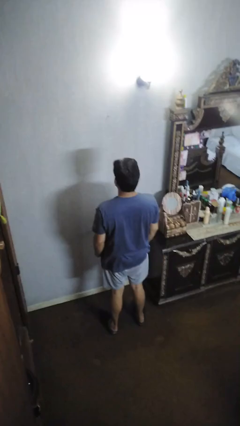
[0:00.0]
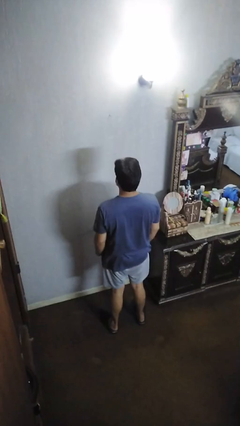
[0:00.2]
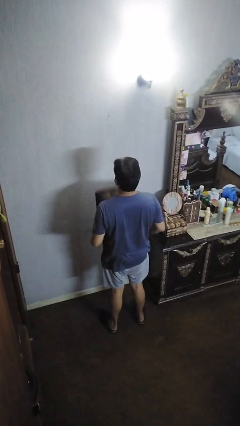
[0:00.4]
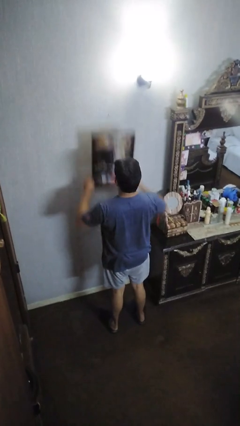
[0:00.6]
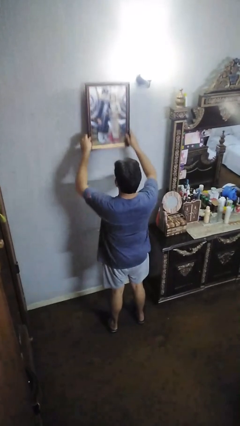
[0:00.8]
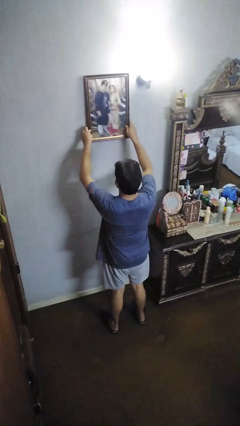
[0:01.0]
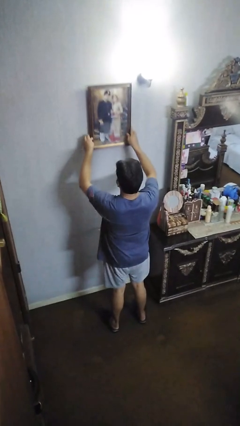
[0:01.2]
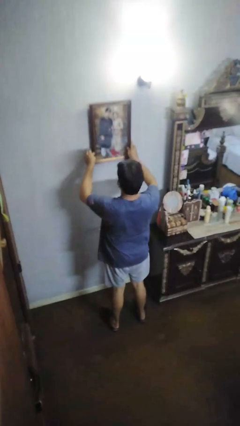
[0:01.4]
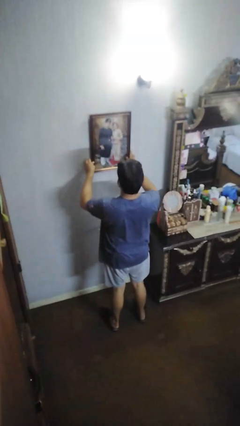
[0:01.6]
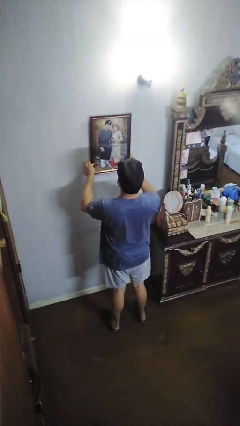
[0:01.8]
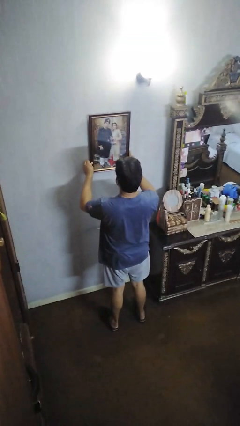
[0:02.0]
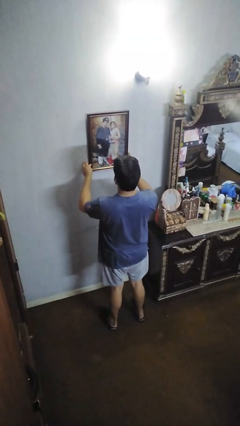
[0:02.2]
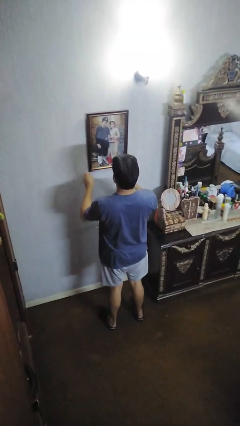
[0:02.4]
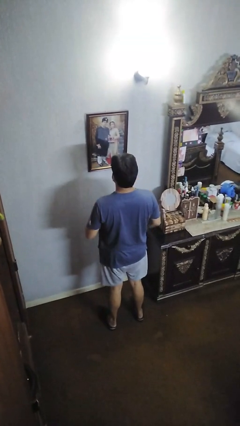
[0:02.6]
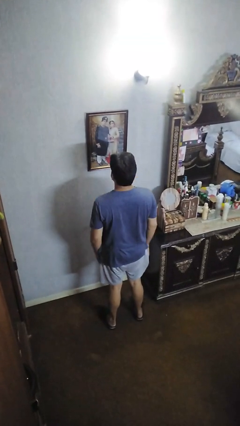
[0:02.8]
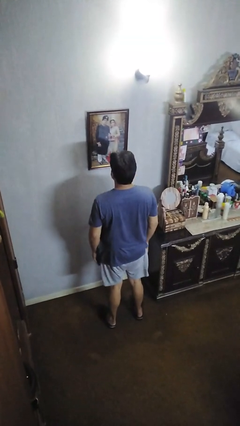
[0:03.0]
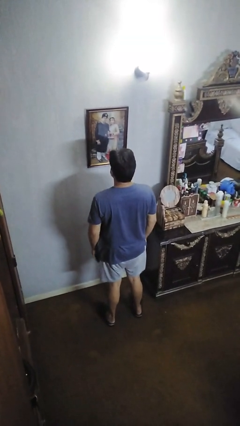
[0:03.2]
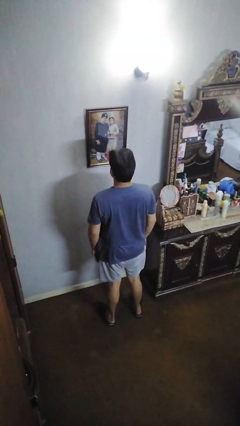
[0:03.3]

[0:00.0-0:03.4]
person puts up picture frame

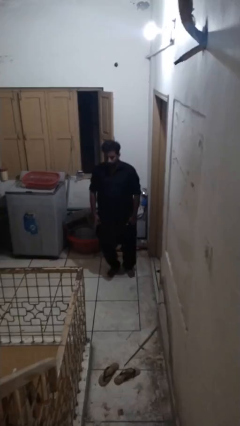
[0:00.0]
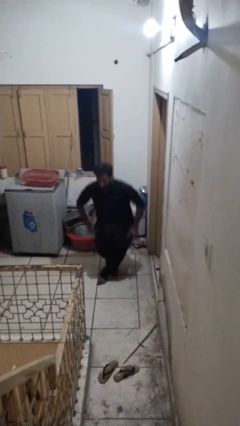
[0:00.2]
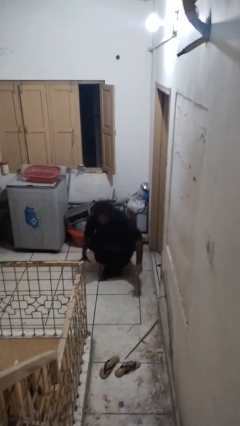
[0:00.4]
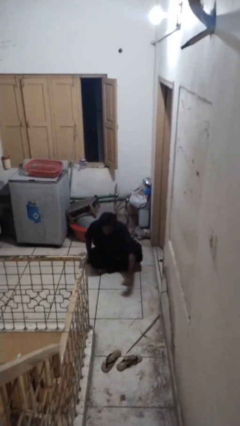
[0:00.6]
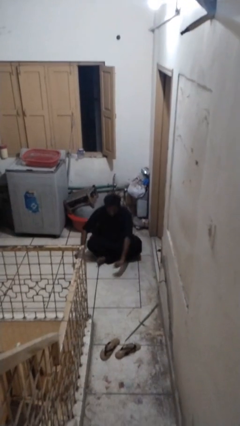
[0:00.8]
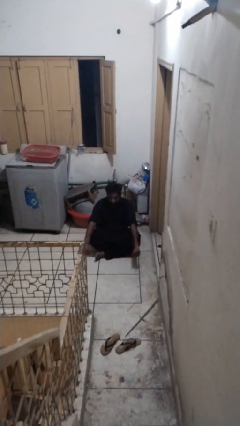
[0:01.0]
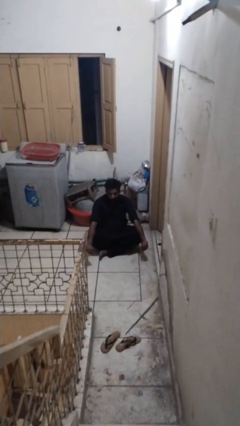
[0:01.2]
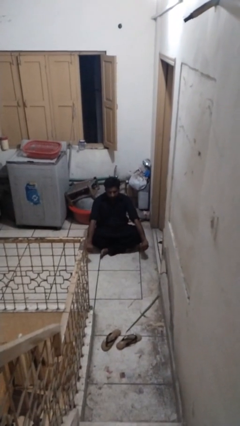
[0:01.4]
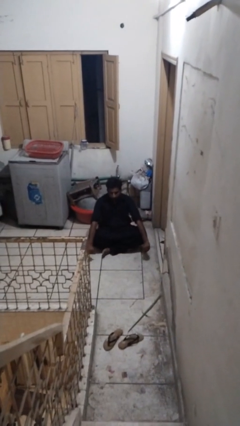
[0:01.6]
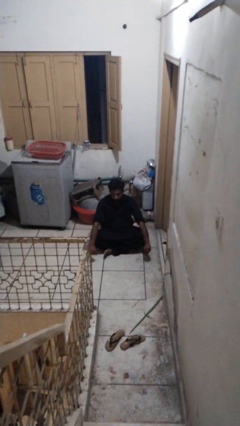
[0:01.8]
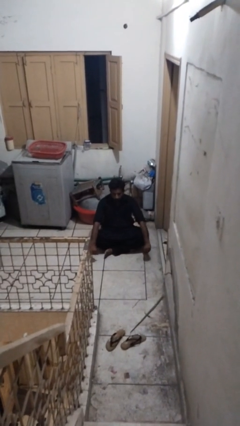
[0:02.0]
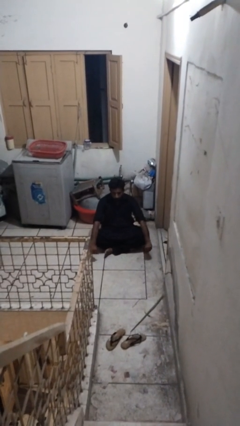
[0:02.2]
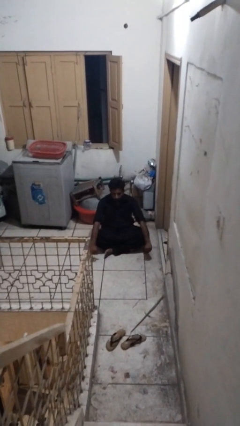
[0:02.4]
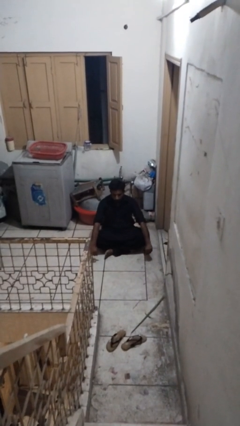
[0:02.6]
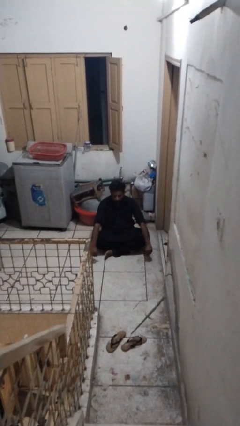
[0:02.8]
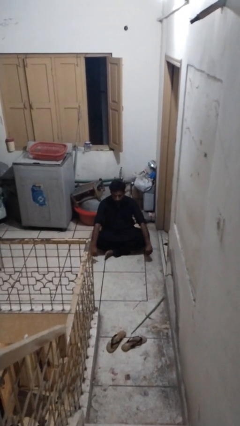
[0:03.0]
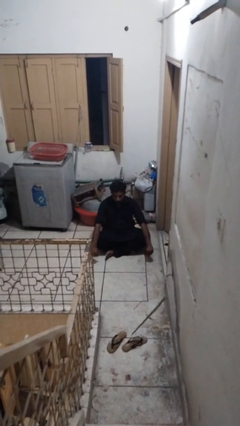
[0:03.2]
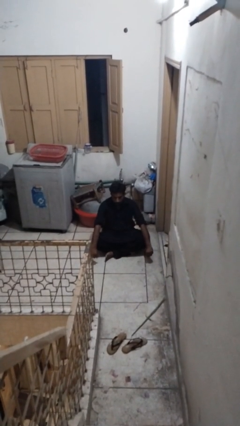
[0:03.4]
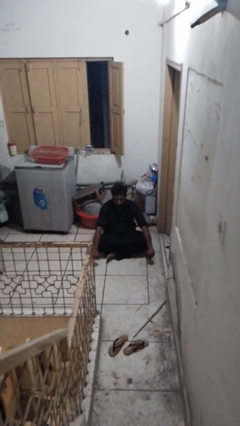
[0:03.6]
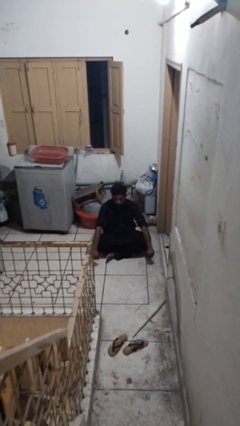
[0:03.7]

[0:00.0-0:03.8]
person sits crisscross

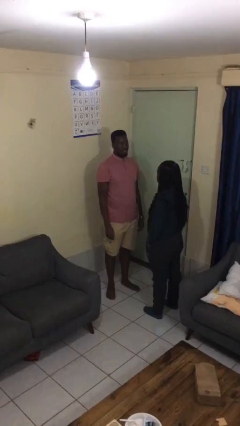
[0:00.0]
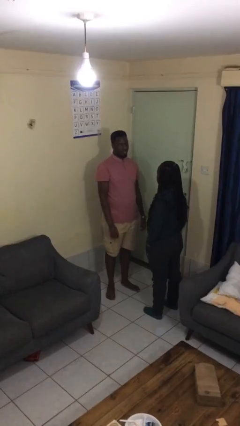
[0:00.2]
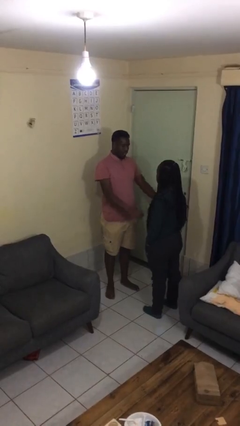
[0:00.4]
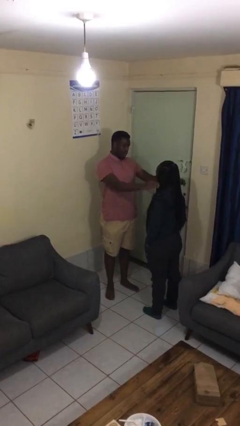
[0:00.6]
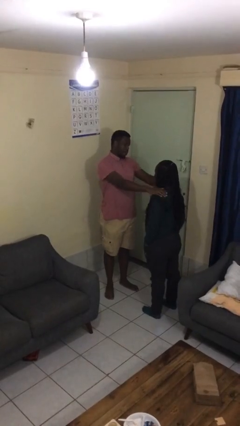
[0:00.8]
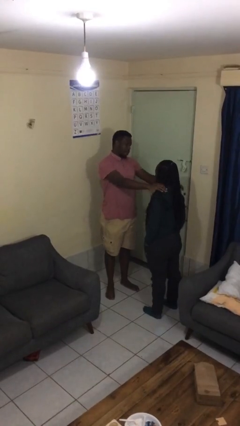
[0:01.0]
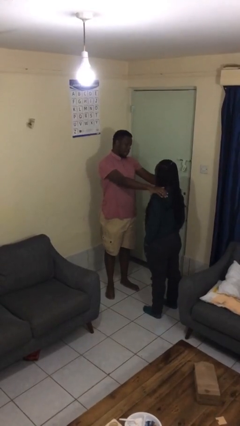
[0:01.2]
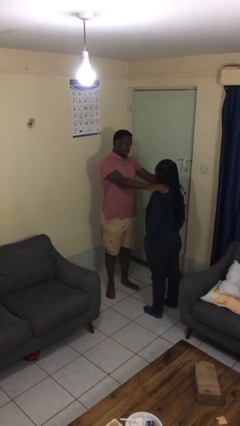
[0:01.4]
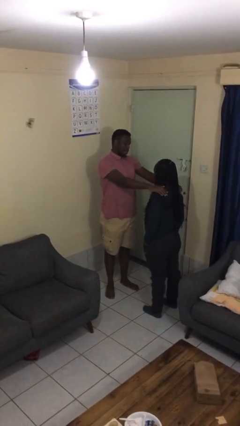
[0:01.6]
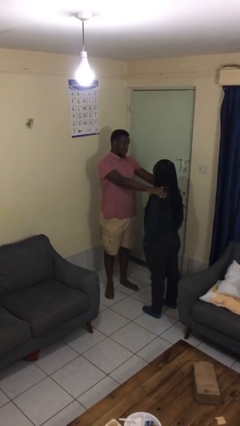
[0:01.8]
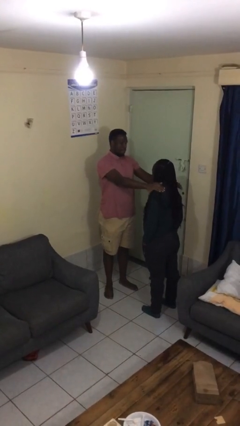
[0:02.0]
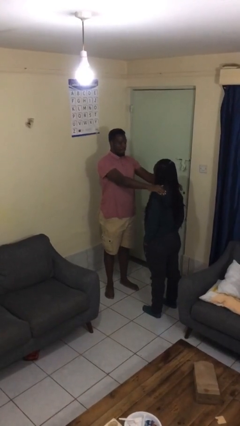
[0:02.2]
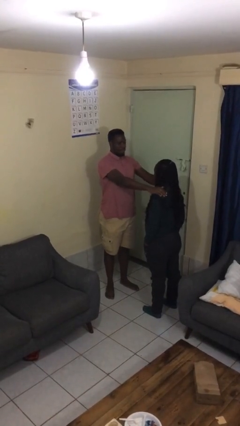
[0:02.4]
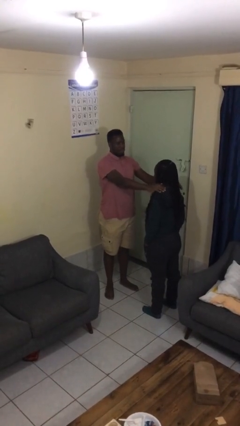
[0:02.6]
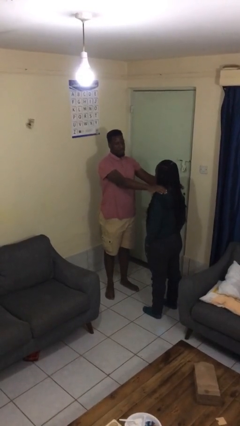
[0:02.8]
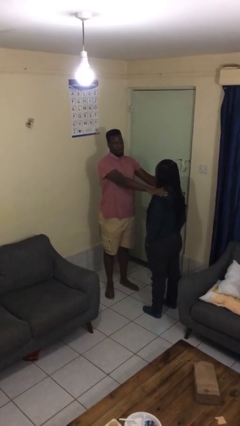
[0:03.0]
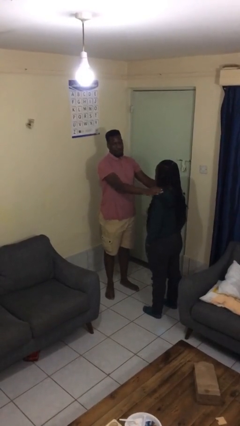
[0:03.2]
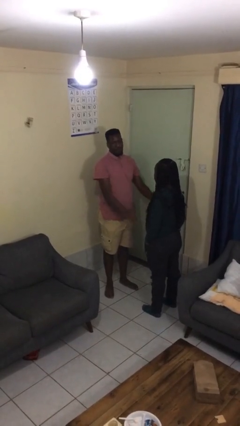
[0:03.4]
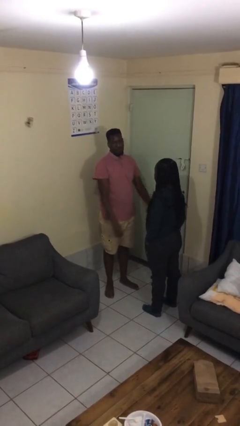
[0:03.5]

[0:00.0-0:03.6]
person pounds shoulders of person

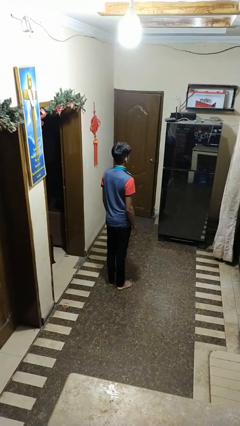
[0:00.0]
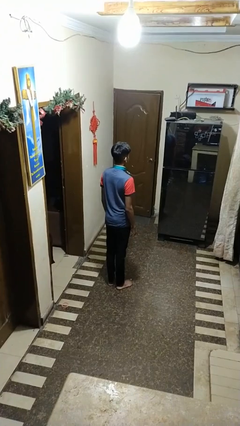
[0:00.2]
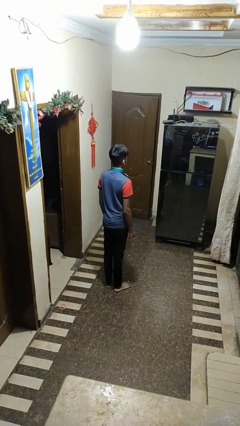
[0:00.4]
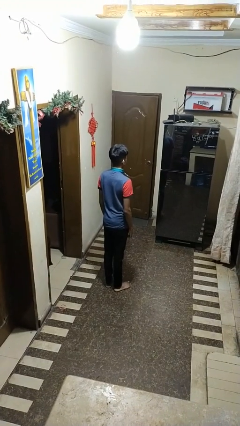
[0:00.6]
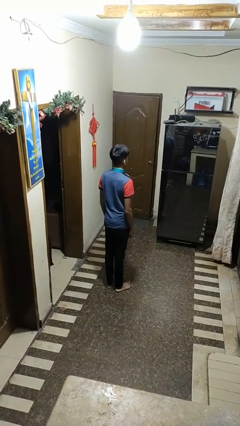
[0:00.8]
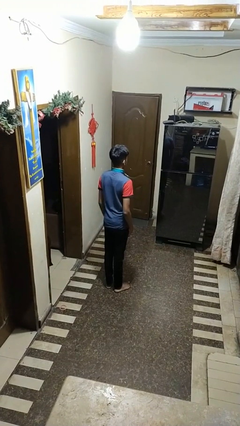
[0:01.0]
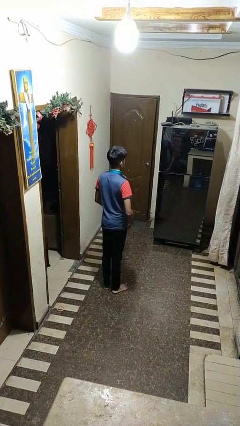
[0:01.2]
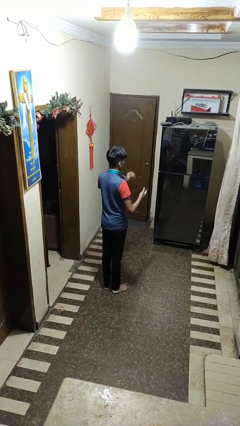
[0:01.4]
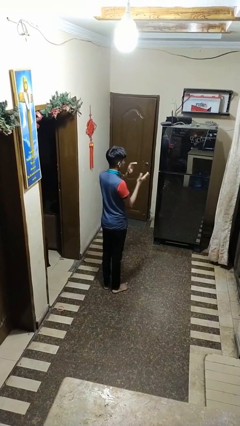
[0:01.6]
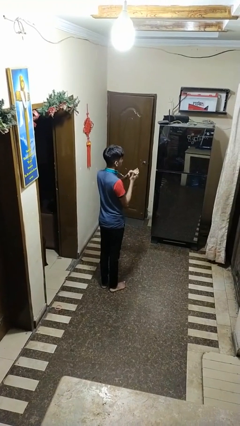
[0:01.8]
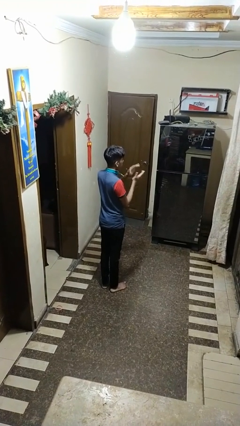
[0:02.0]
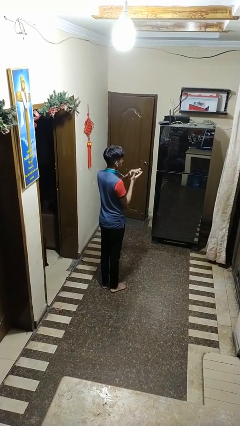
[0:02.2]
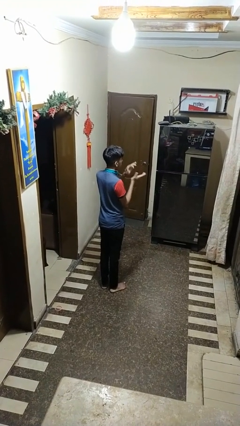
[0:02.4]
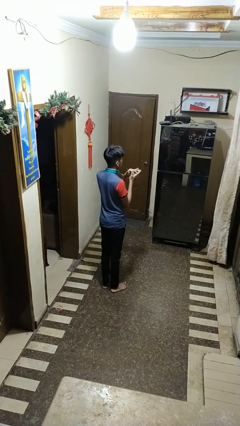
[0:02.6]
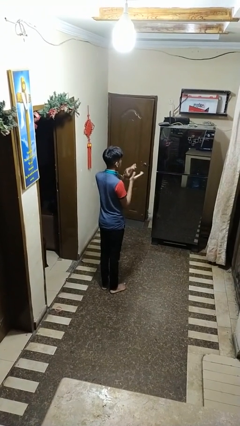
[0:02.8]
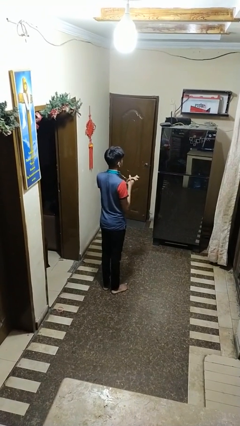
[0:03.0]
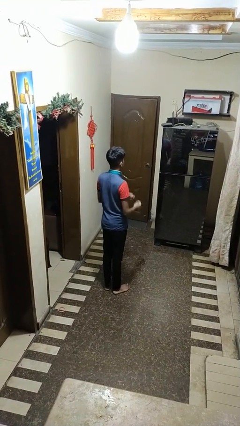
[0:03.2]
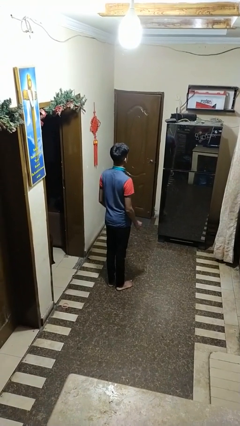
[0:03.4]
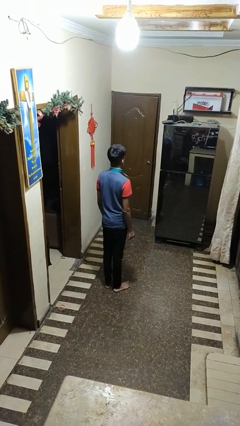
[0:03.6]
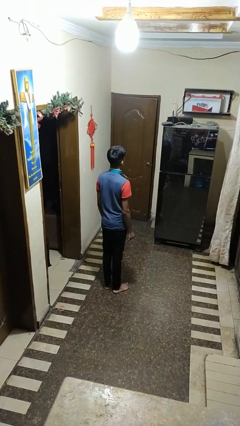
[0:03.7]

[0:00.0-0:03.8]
person claps hands

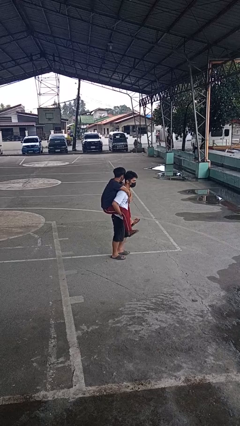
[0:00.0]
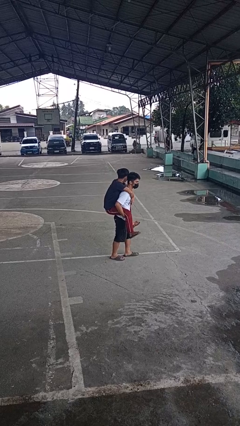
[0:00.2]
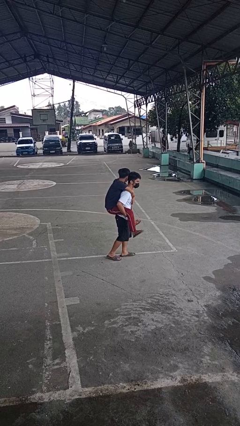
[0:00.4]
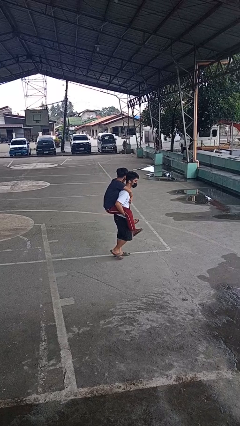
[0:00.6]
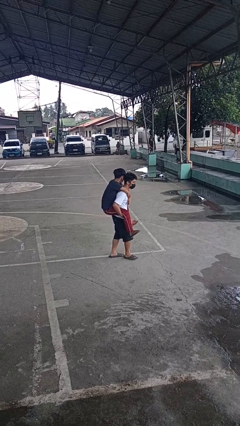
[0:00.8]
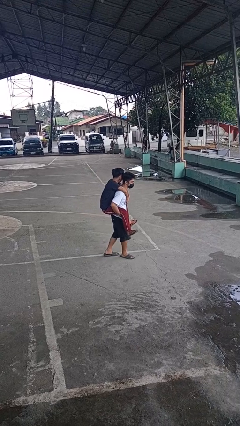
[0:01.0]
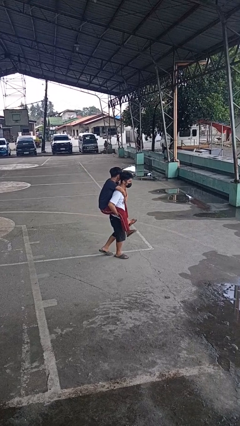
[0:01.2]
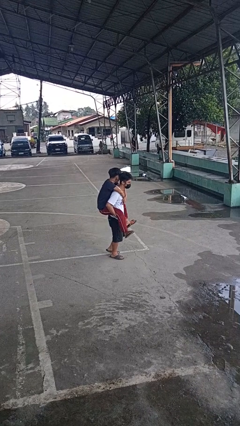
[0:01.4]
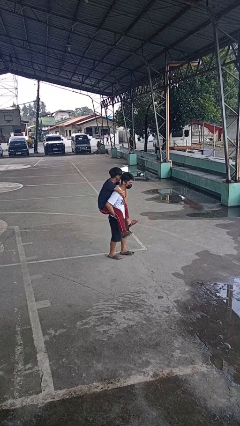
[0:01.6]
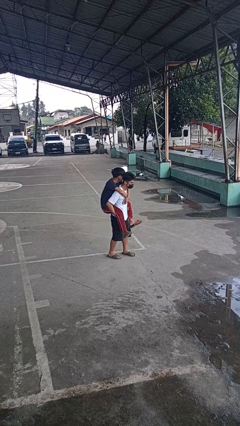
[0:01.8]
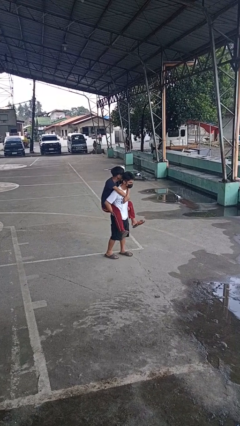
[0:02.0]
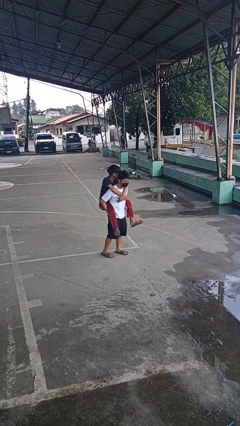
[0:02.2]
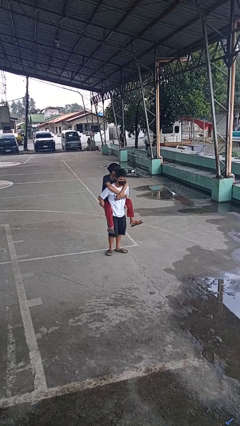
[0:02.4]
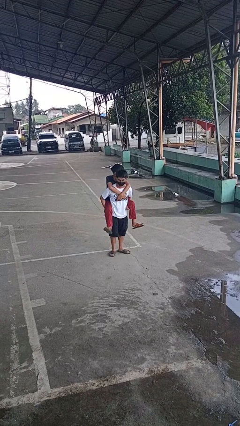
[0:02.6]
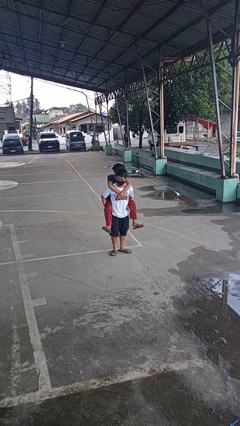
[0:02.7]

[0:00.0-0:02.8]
person carries person on shoulders

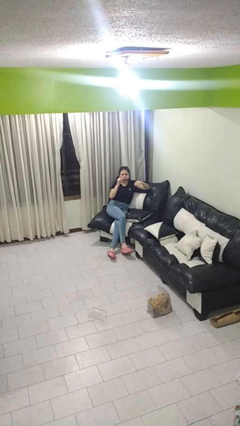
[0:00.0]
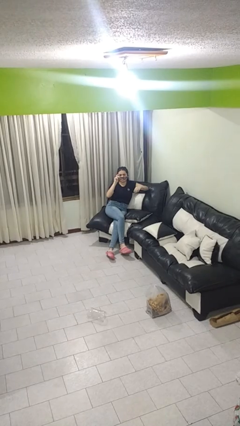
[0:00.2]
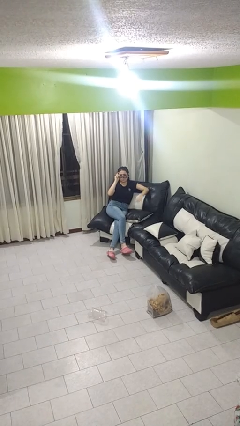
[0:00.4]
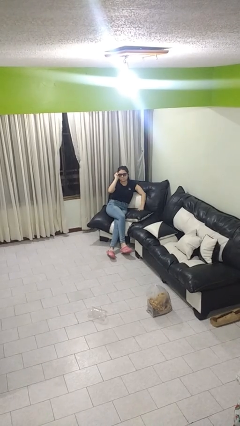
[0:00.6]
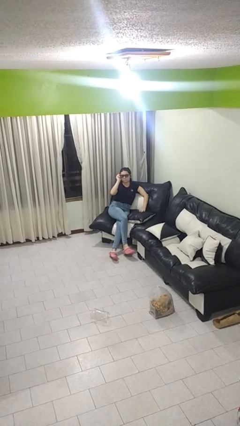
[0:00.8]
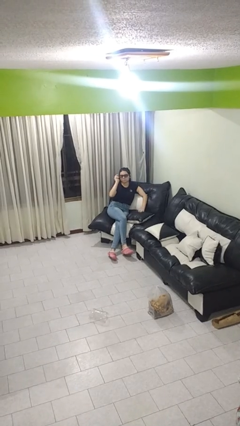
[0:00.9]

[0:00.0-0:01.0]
person puts on sunglasses
